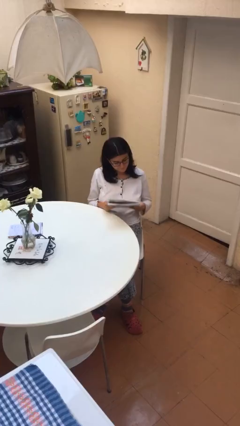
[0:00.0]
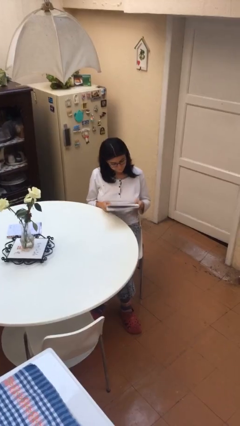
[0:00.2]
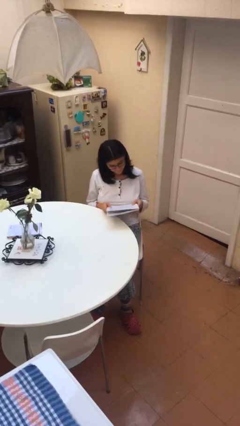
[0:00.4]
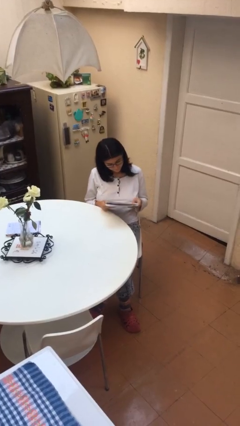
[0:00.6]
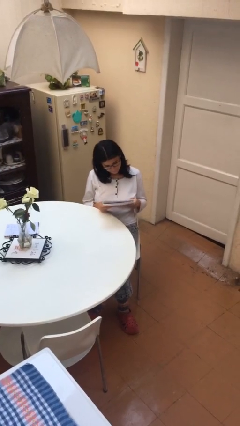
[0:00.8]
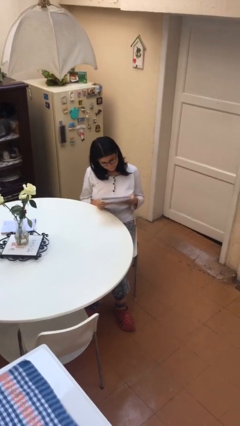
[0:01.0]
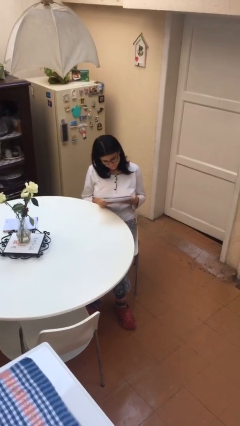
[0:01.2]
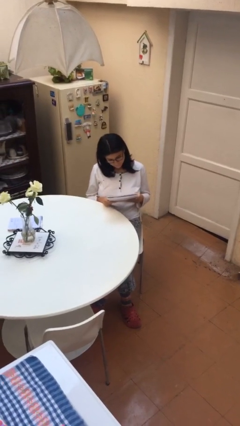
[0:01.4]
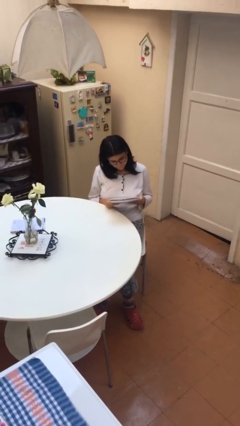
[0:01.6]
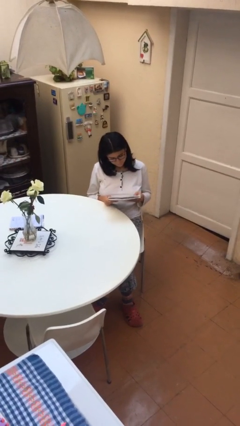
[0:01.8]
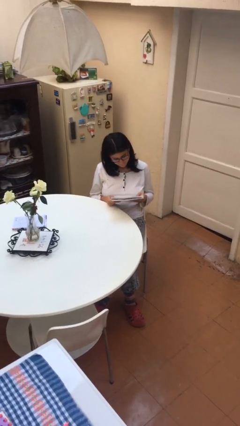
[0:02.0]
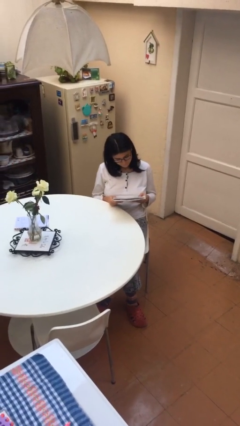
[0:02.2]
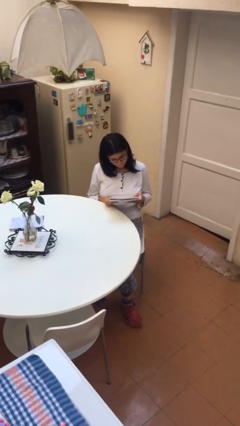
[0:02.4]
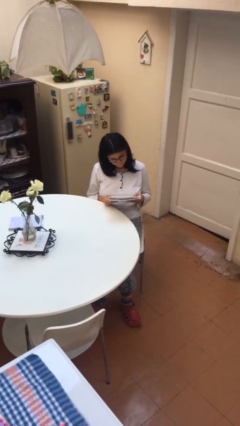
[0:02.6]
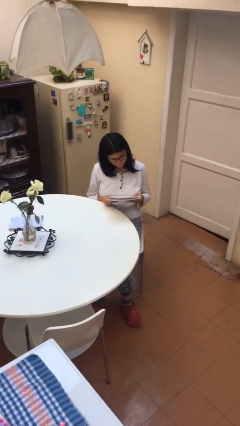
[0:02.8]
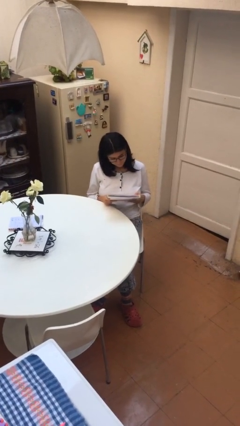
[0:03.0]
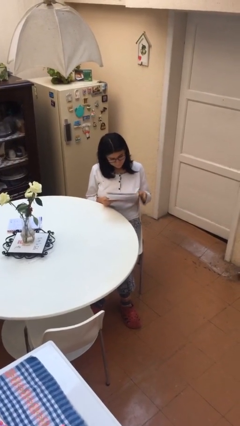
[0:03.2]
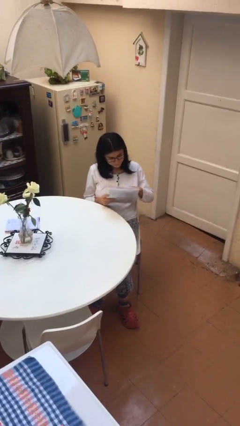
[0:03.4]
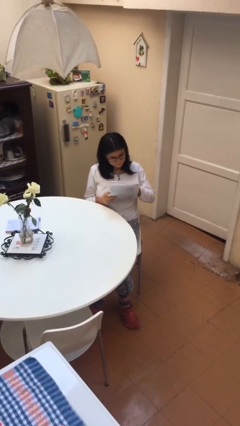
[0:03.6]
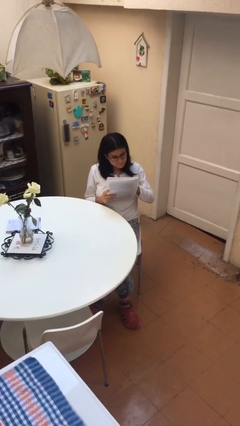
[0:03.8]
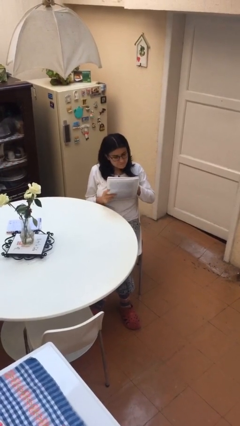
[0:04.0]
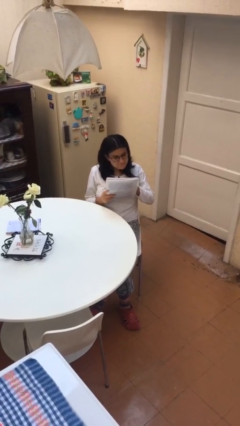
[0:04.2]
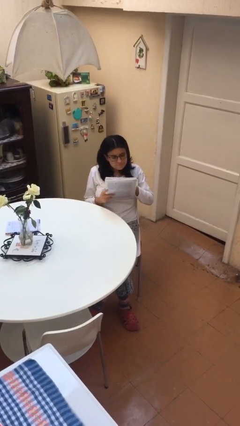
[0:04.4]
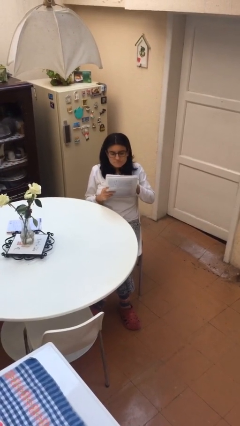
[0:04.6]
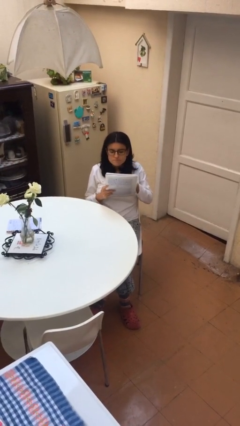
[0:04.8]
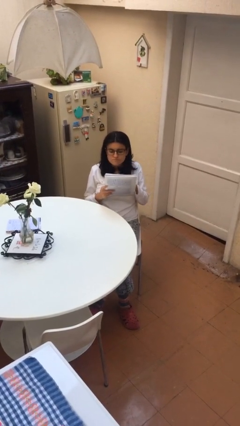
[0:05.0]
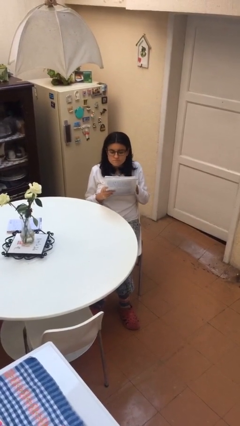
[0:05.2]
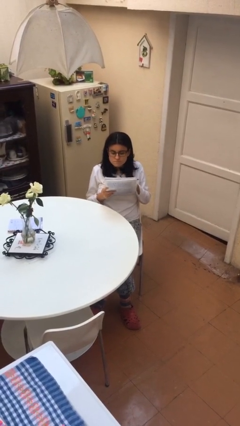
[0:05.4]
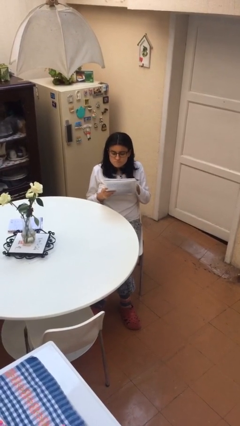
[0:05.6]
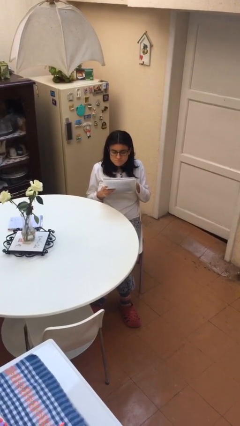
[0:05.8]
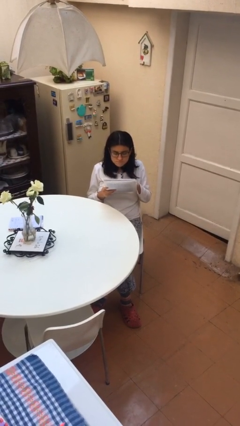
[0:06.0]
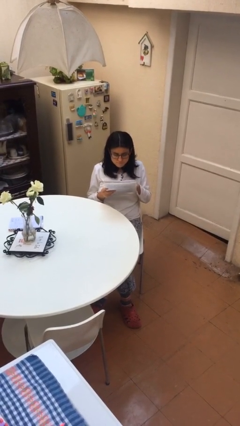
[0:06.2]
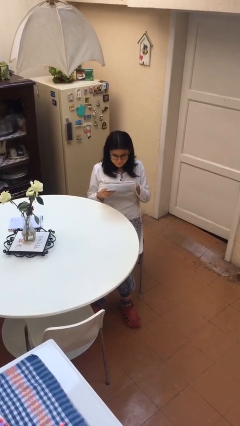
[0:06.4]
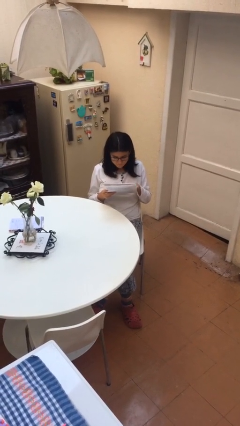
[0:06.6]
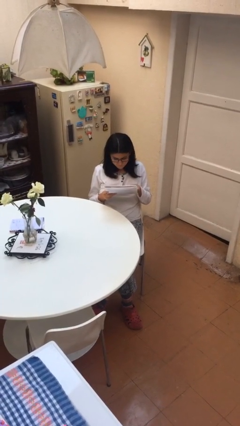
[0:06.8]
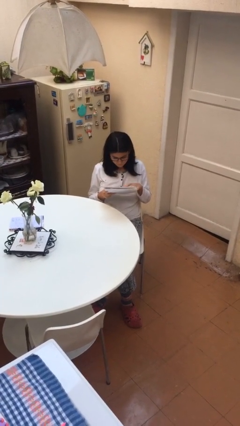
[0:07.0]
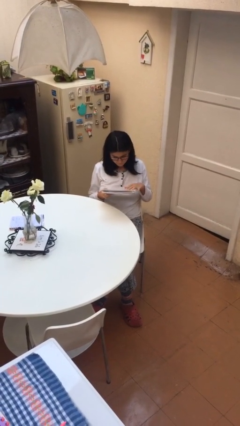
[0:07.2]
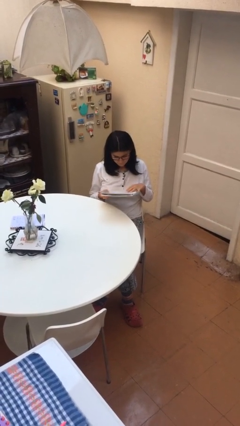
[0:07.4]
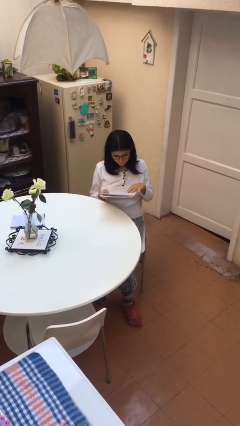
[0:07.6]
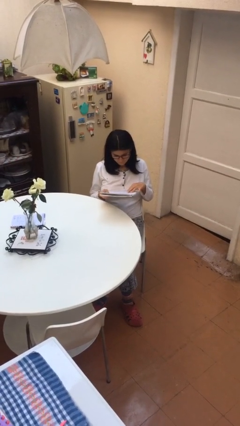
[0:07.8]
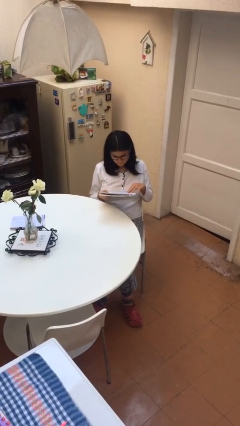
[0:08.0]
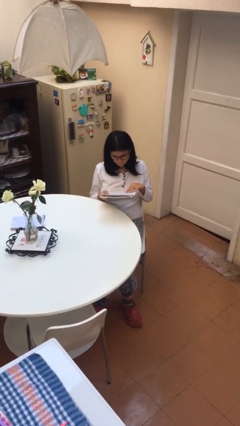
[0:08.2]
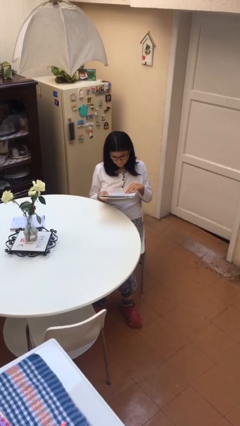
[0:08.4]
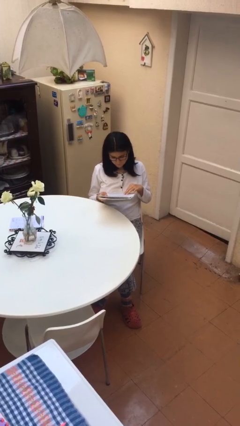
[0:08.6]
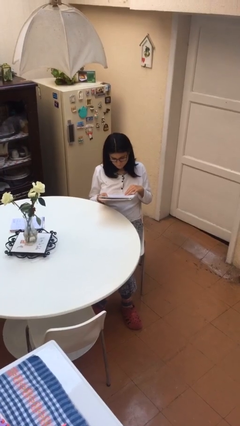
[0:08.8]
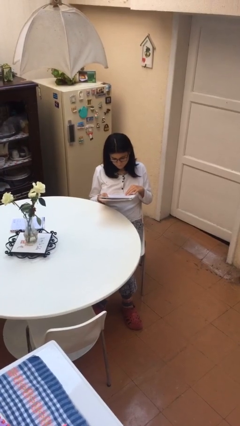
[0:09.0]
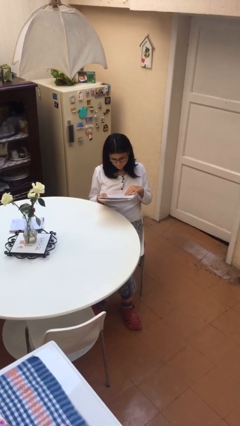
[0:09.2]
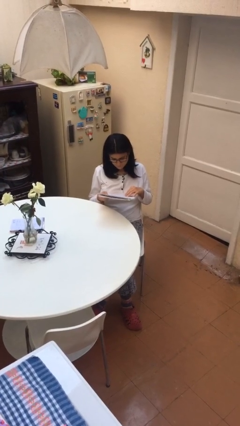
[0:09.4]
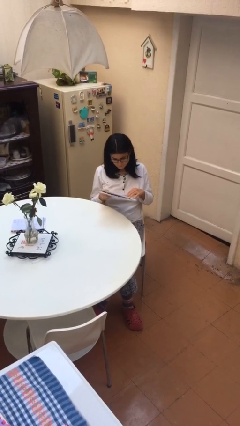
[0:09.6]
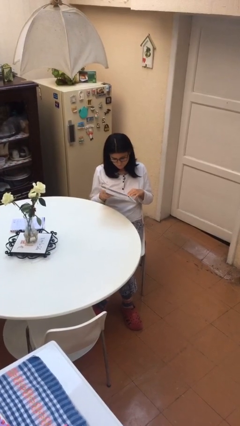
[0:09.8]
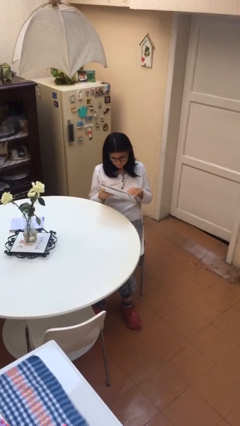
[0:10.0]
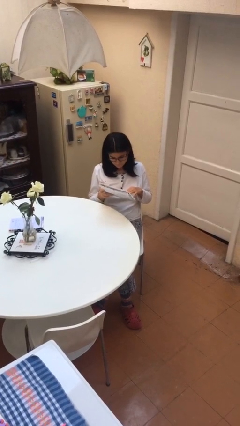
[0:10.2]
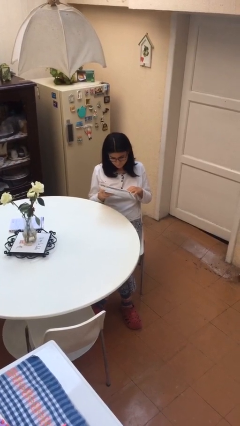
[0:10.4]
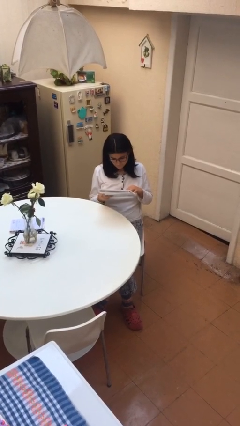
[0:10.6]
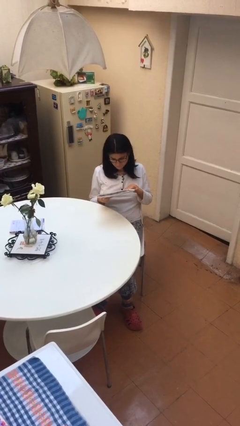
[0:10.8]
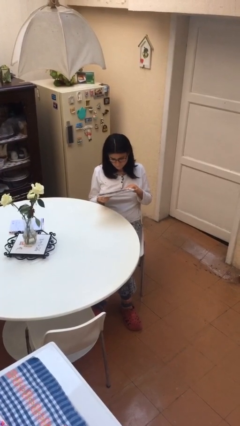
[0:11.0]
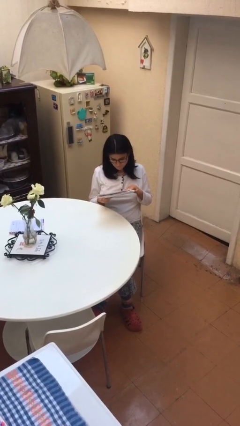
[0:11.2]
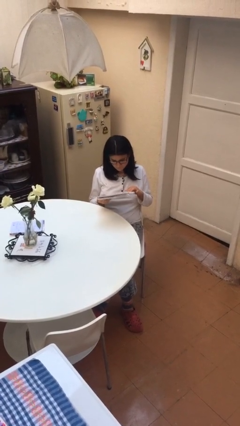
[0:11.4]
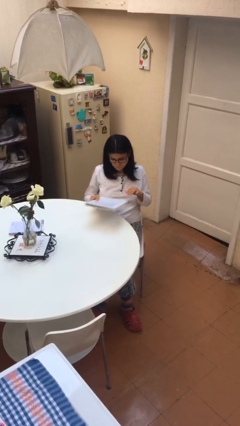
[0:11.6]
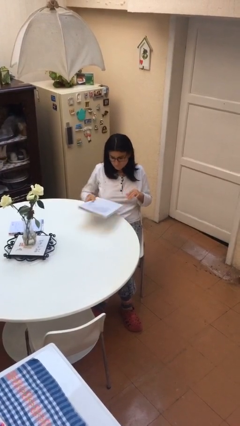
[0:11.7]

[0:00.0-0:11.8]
person reads document

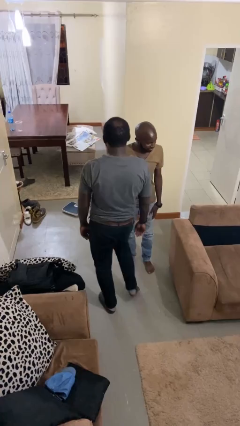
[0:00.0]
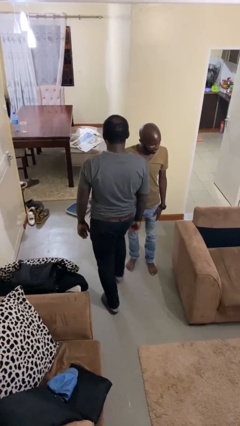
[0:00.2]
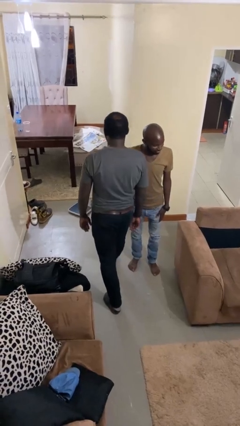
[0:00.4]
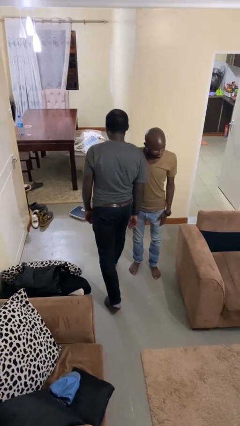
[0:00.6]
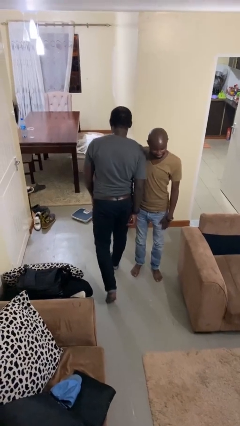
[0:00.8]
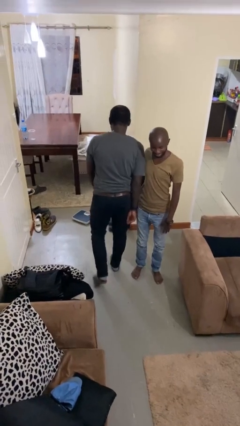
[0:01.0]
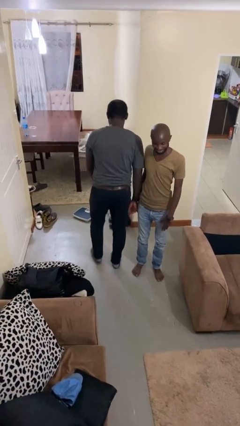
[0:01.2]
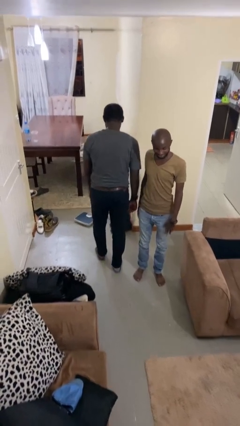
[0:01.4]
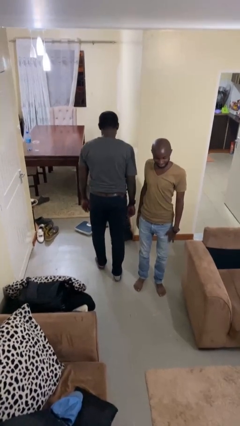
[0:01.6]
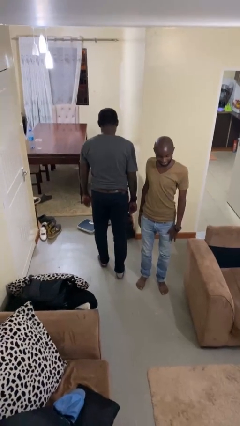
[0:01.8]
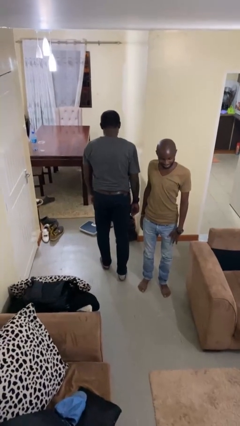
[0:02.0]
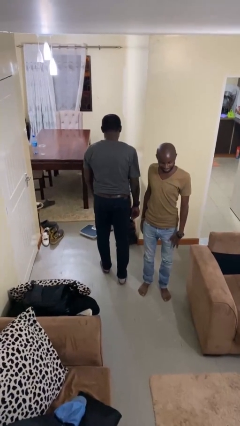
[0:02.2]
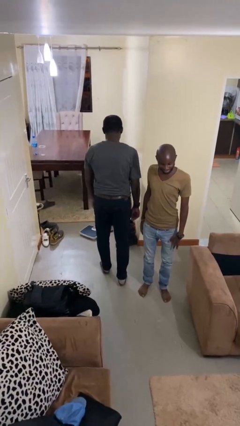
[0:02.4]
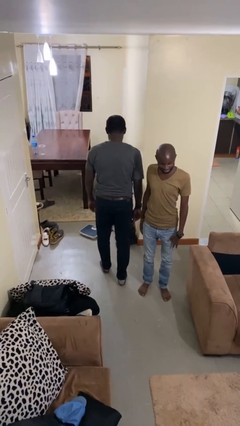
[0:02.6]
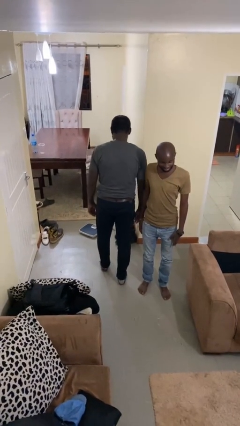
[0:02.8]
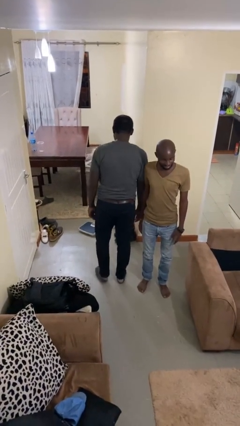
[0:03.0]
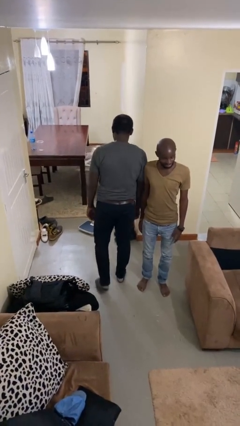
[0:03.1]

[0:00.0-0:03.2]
person bumps into person

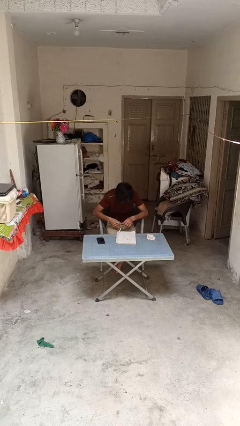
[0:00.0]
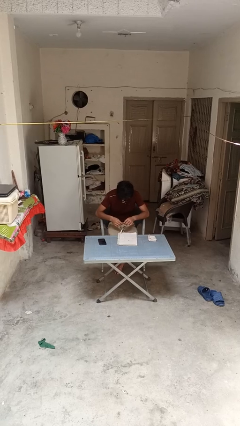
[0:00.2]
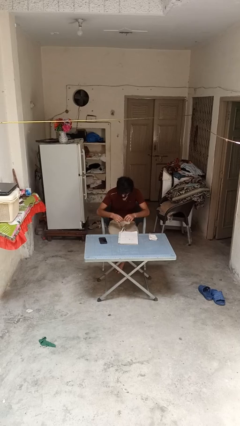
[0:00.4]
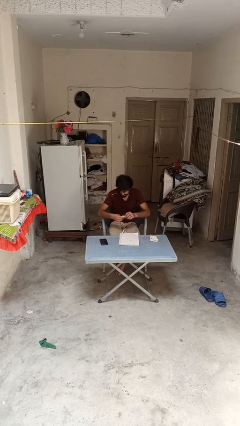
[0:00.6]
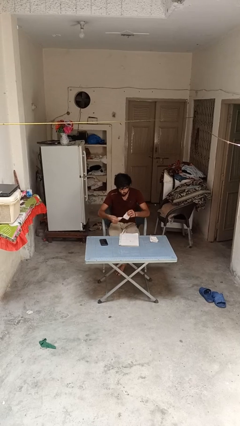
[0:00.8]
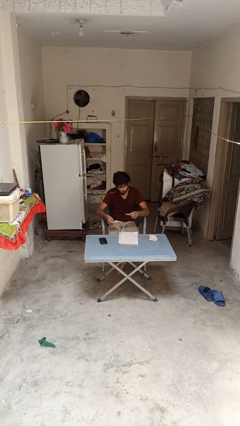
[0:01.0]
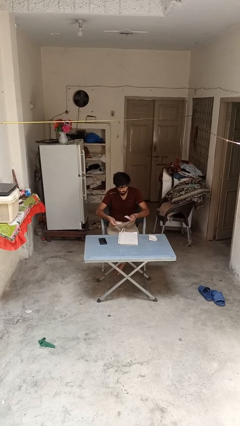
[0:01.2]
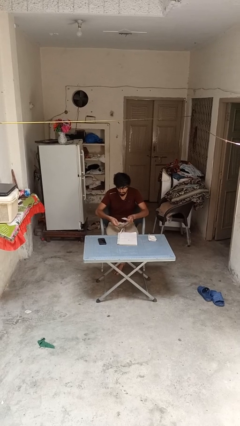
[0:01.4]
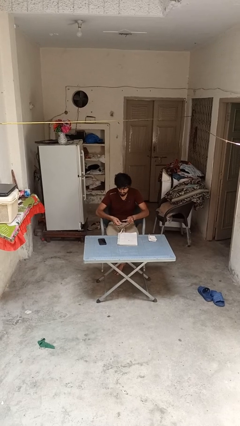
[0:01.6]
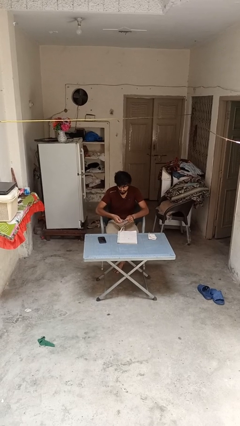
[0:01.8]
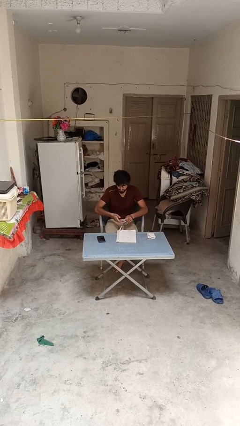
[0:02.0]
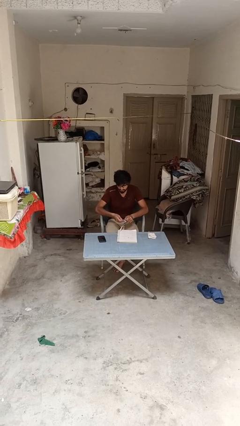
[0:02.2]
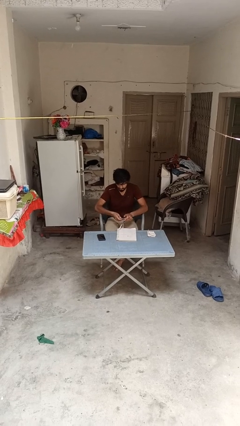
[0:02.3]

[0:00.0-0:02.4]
person tears paper

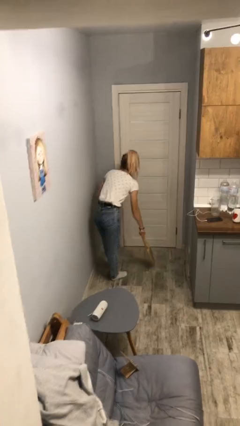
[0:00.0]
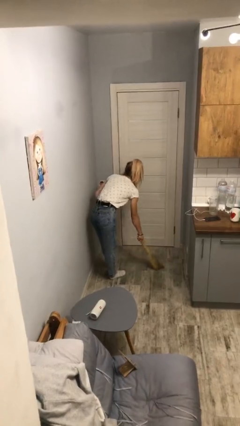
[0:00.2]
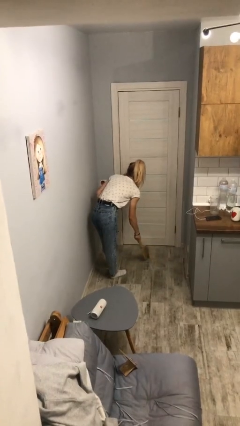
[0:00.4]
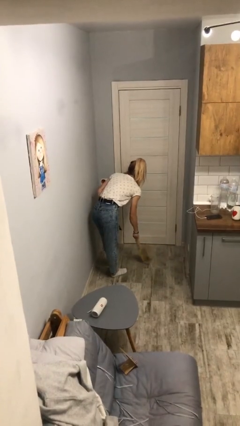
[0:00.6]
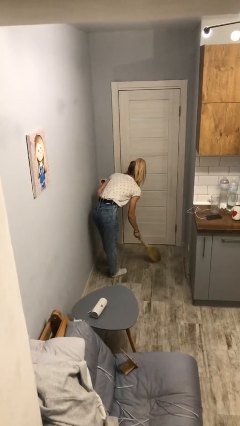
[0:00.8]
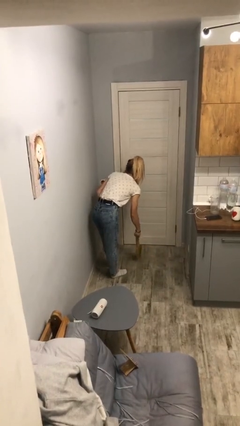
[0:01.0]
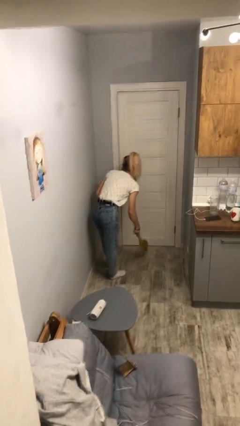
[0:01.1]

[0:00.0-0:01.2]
person sweeps floor
